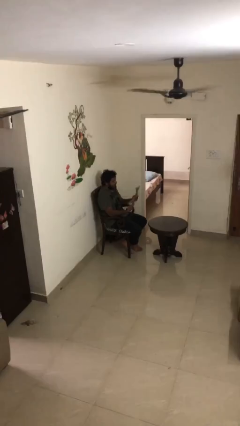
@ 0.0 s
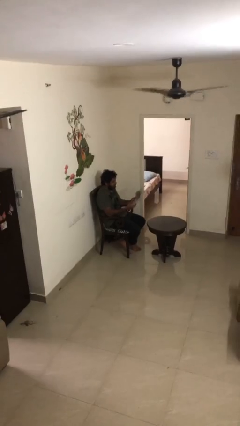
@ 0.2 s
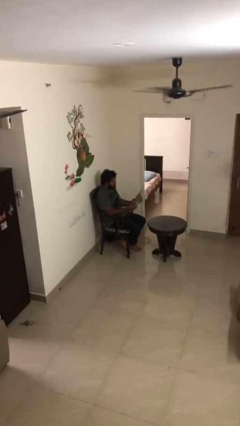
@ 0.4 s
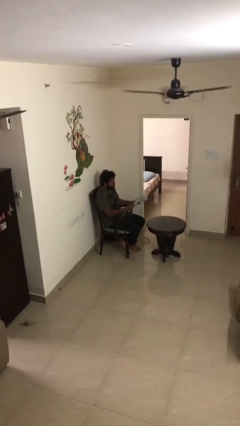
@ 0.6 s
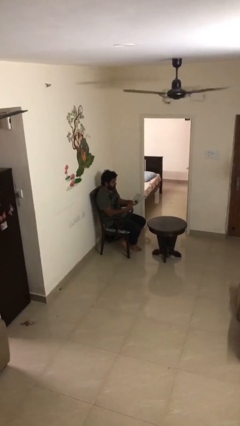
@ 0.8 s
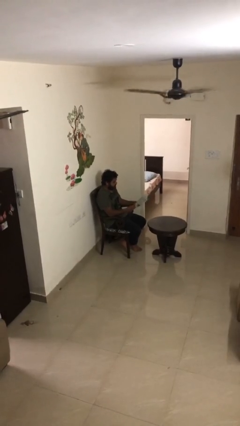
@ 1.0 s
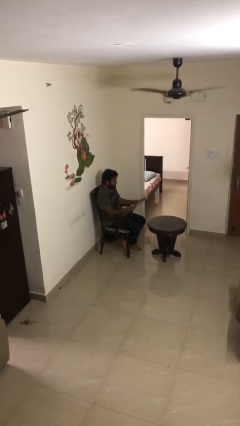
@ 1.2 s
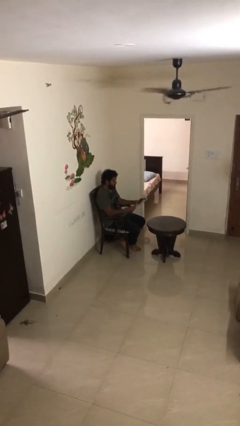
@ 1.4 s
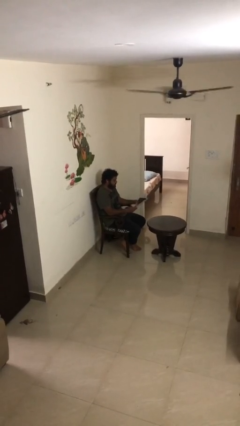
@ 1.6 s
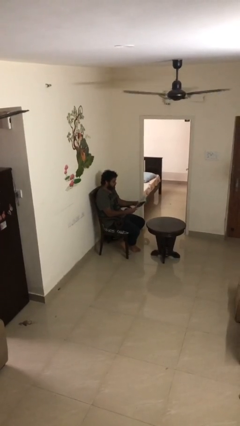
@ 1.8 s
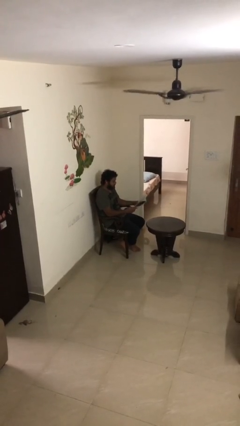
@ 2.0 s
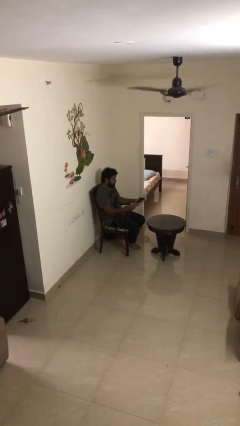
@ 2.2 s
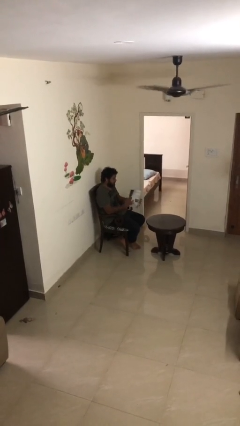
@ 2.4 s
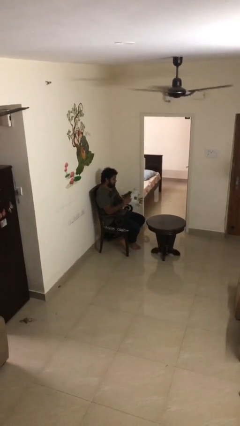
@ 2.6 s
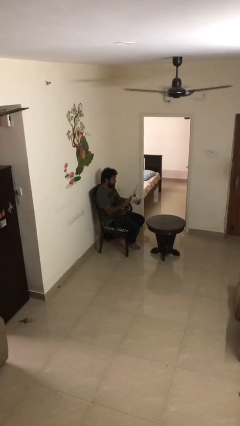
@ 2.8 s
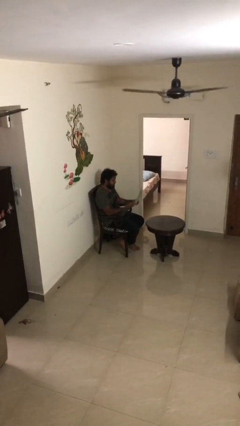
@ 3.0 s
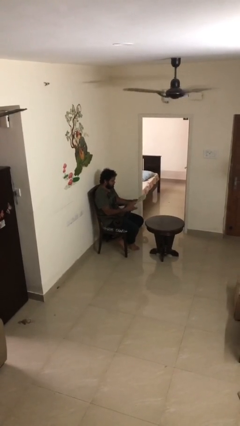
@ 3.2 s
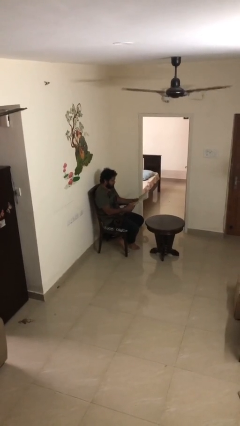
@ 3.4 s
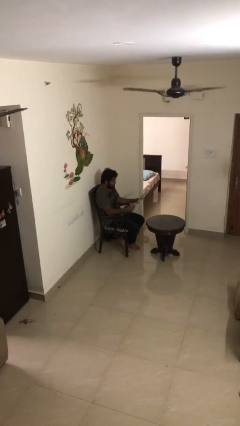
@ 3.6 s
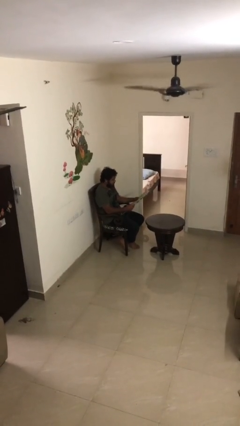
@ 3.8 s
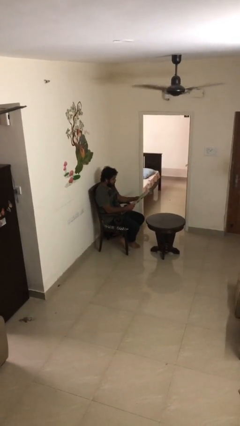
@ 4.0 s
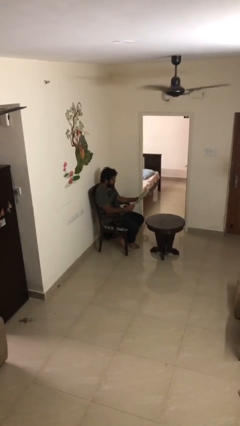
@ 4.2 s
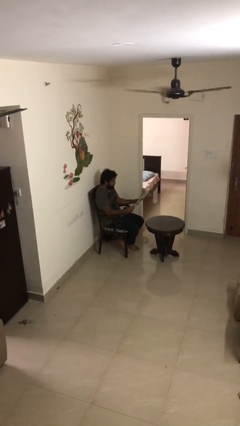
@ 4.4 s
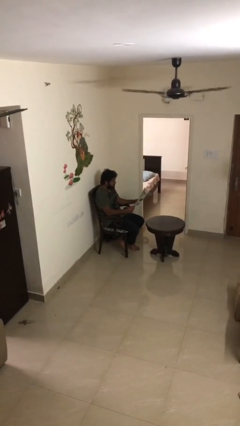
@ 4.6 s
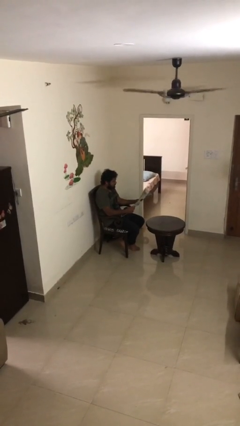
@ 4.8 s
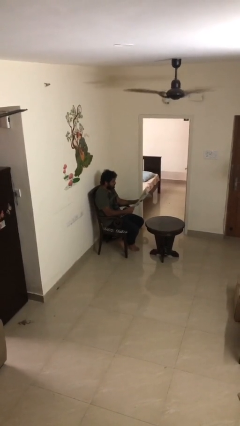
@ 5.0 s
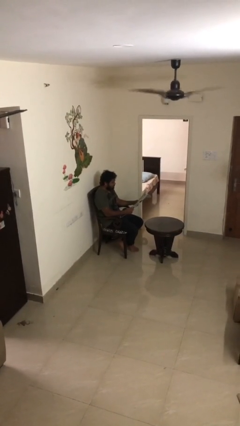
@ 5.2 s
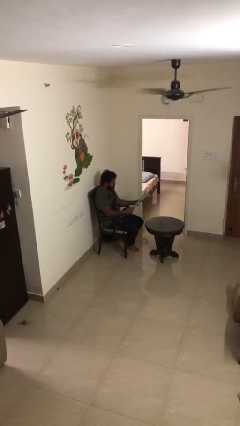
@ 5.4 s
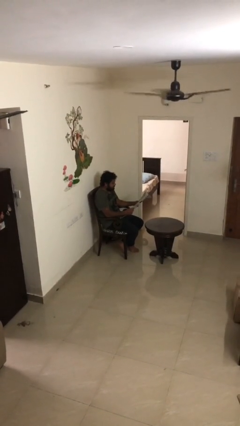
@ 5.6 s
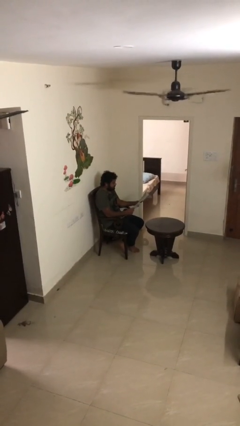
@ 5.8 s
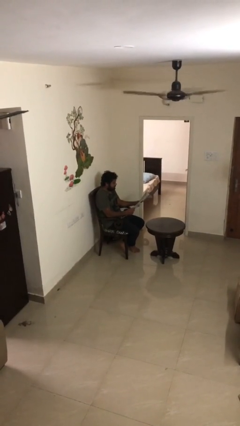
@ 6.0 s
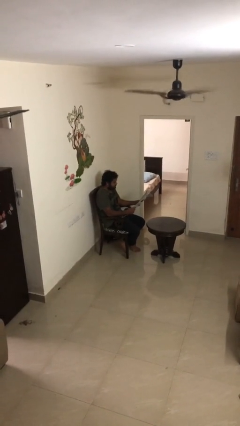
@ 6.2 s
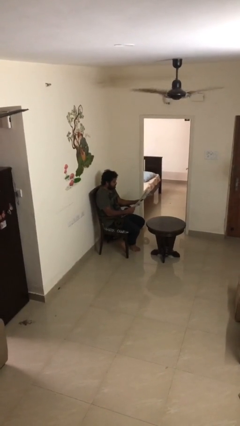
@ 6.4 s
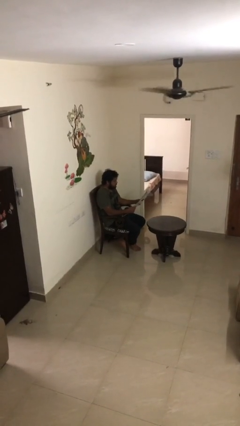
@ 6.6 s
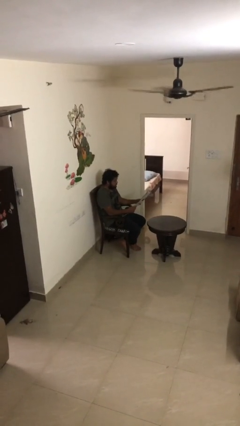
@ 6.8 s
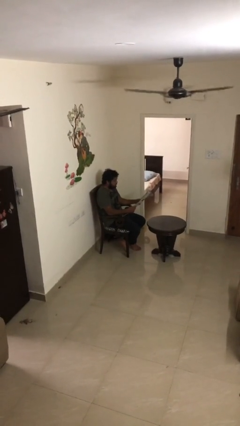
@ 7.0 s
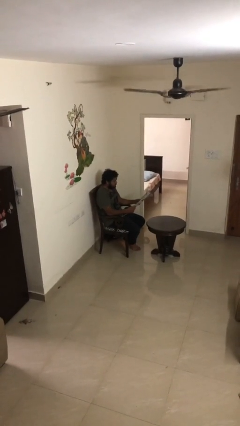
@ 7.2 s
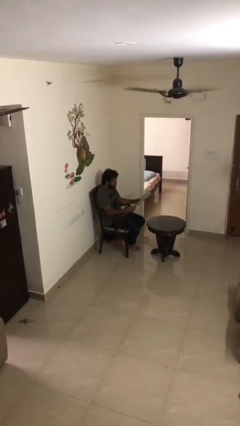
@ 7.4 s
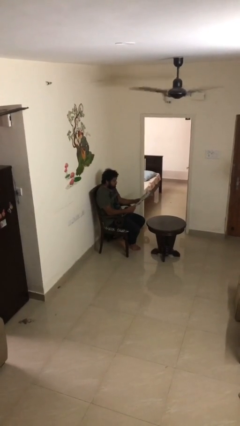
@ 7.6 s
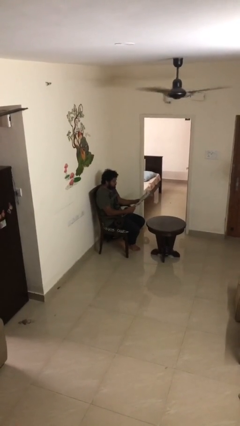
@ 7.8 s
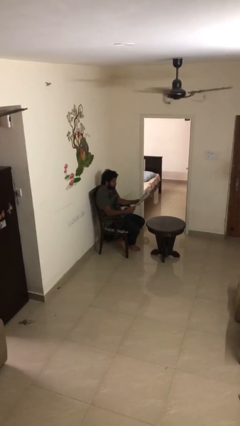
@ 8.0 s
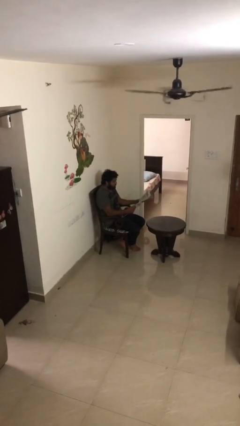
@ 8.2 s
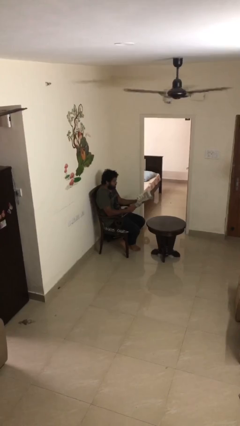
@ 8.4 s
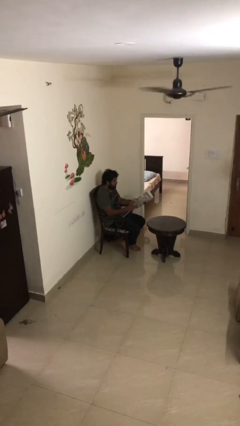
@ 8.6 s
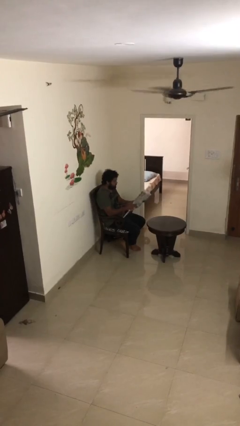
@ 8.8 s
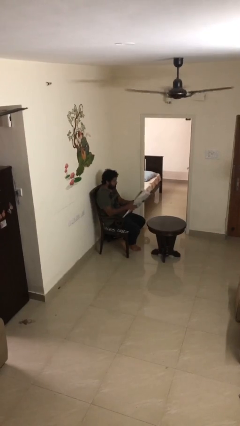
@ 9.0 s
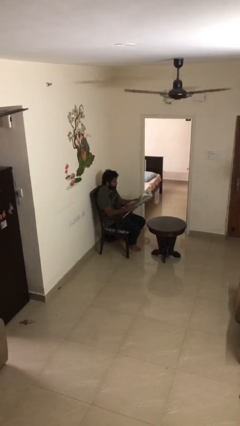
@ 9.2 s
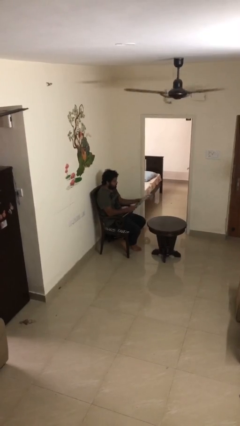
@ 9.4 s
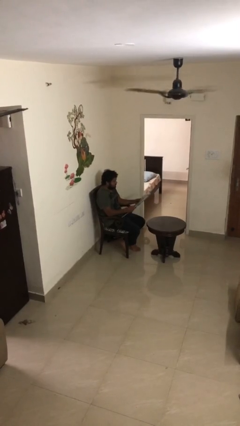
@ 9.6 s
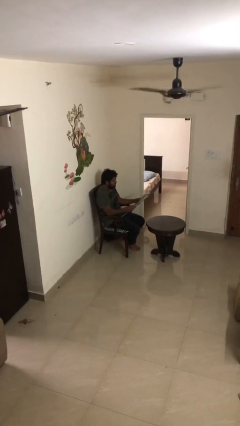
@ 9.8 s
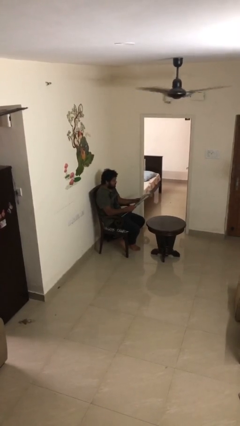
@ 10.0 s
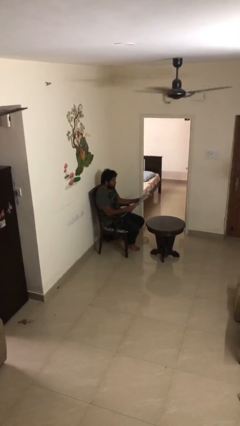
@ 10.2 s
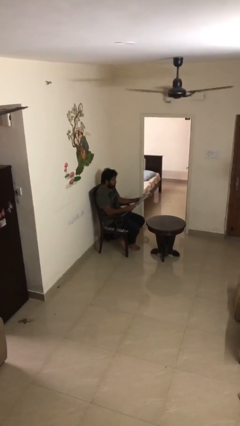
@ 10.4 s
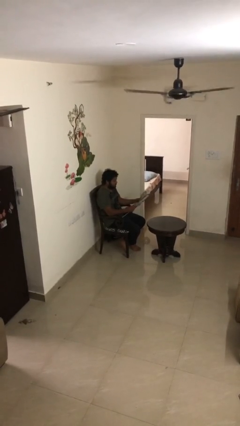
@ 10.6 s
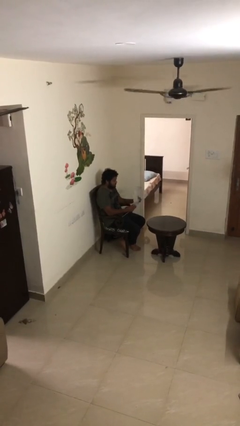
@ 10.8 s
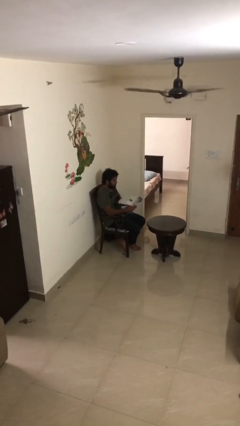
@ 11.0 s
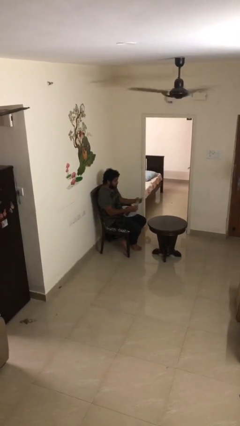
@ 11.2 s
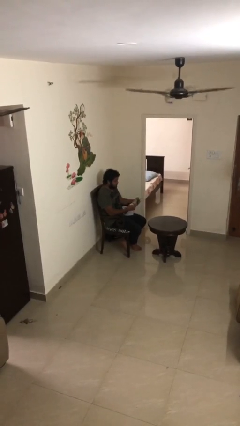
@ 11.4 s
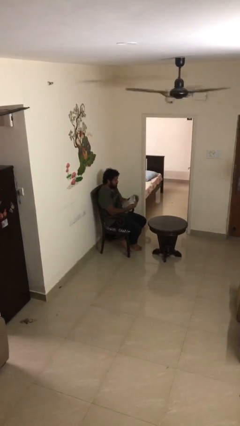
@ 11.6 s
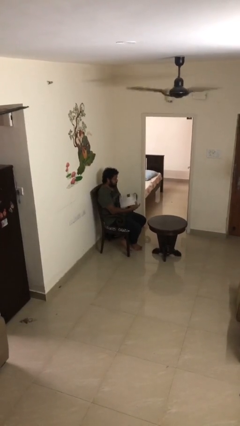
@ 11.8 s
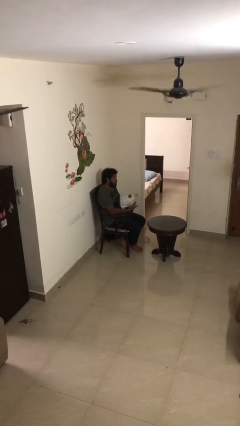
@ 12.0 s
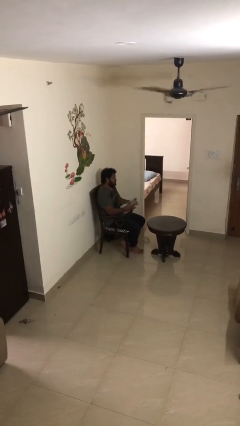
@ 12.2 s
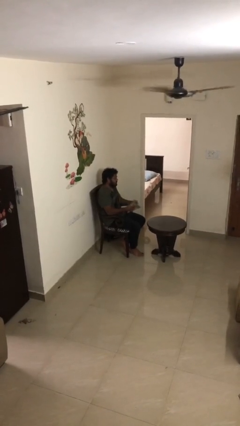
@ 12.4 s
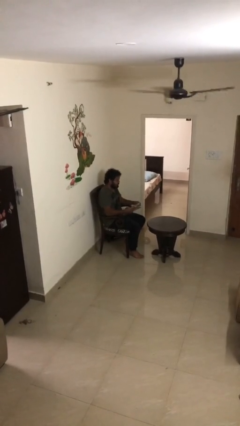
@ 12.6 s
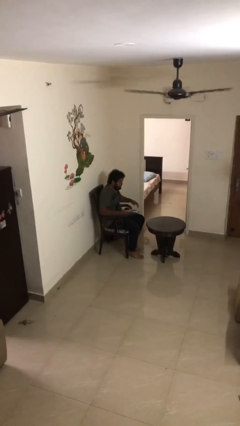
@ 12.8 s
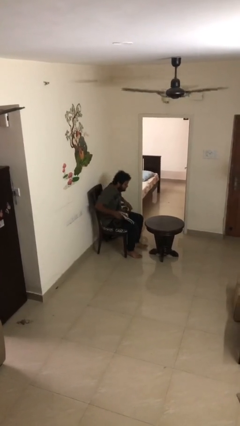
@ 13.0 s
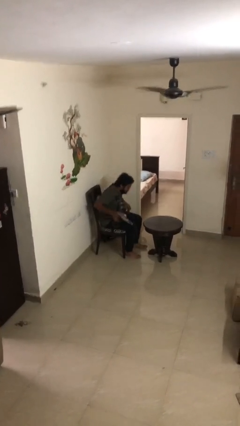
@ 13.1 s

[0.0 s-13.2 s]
person reads document

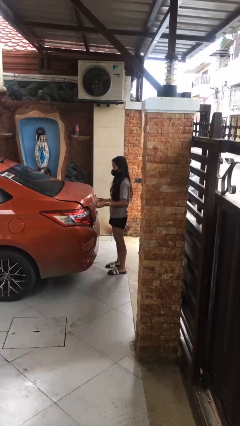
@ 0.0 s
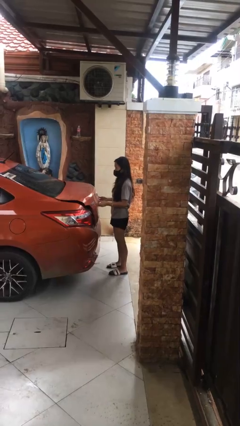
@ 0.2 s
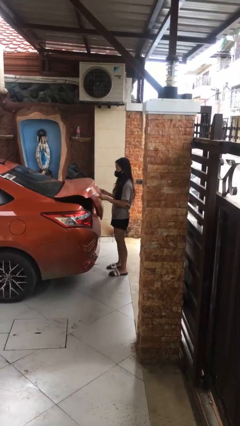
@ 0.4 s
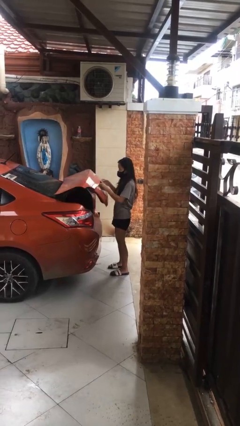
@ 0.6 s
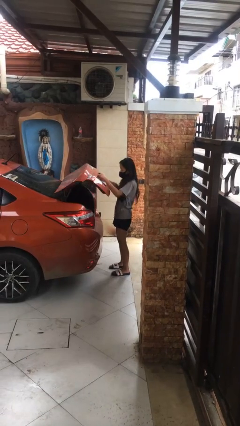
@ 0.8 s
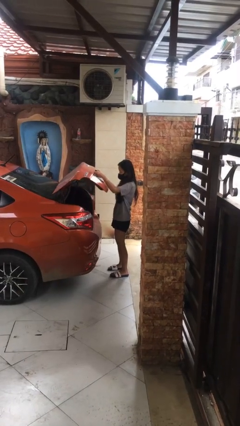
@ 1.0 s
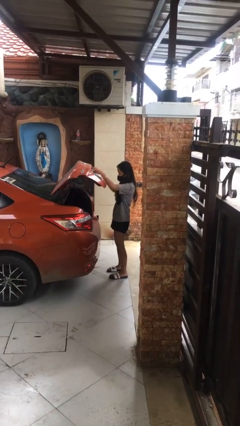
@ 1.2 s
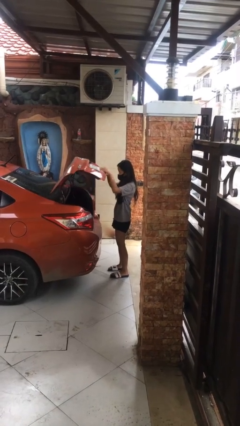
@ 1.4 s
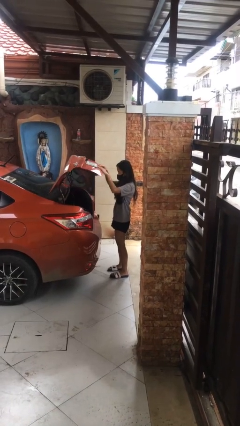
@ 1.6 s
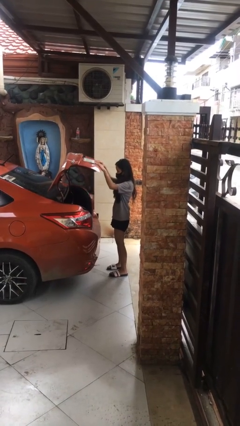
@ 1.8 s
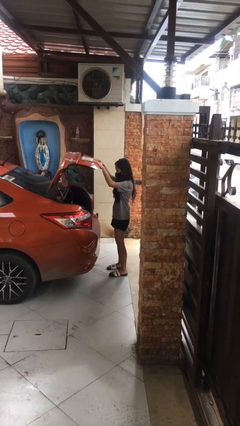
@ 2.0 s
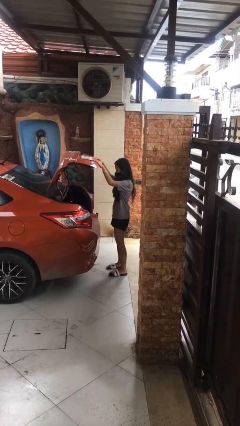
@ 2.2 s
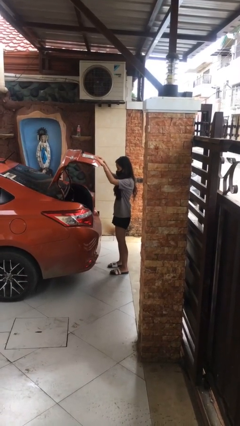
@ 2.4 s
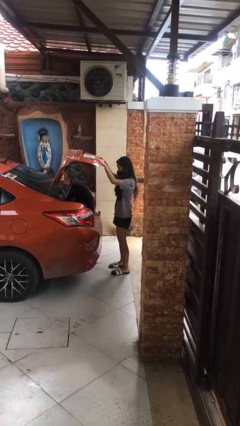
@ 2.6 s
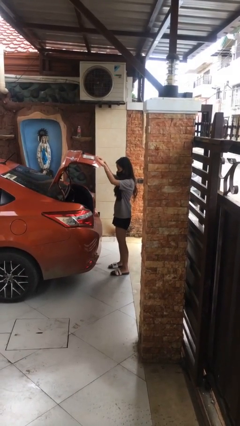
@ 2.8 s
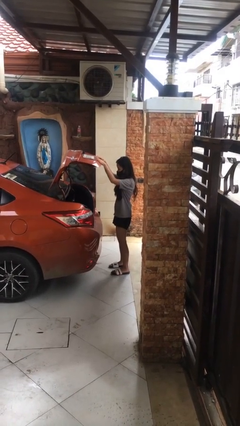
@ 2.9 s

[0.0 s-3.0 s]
person opens car trunk

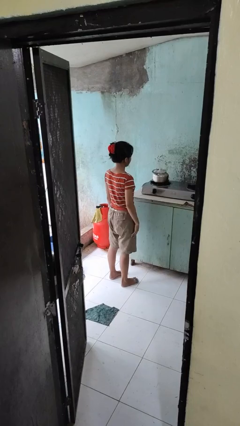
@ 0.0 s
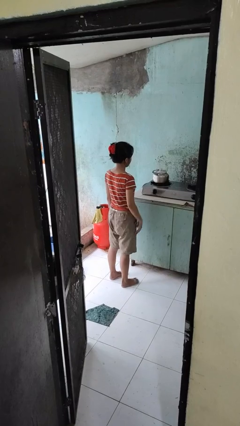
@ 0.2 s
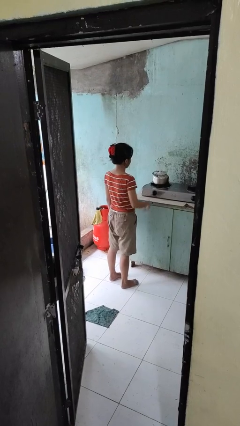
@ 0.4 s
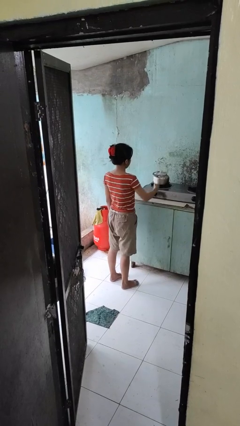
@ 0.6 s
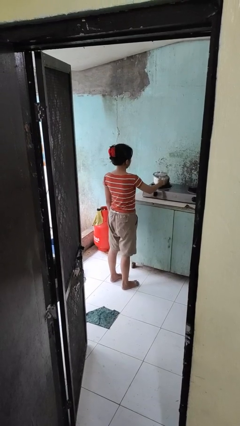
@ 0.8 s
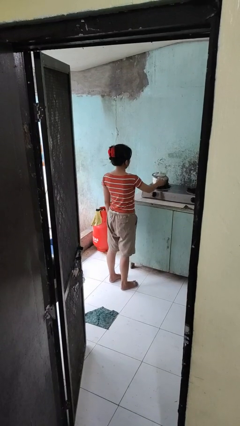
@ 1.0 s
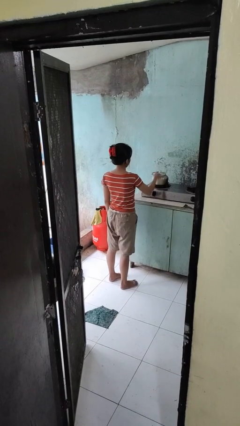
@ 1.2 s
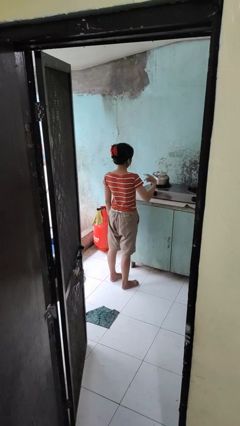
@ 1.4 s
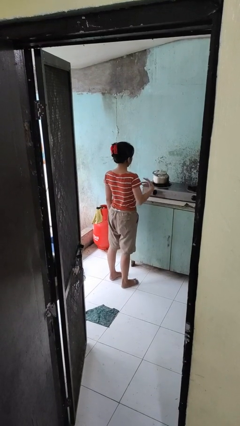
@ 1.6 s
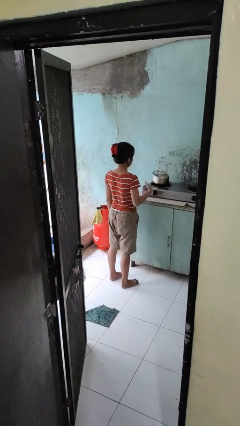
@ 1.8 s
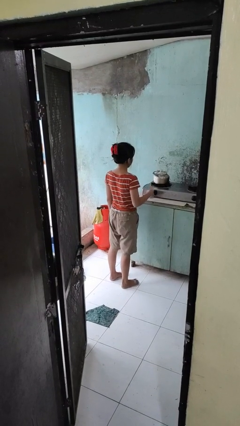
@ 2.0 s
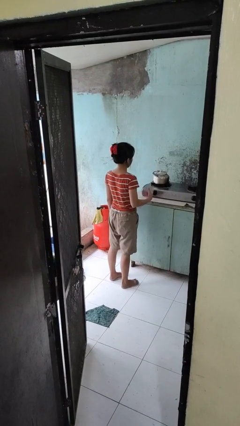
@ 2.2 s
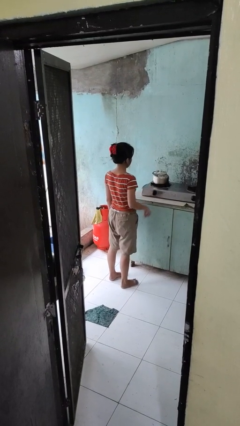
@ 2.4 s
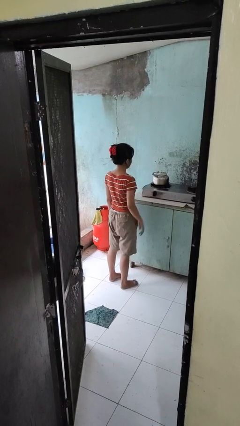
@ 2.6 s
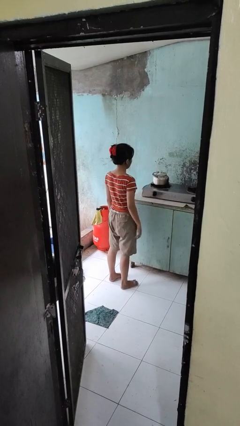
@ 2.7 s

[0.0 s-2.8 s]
person burns hand
